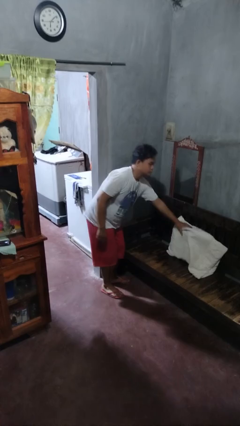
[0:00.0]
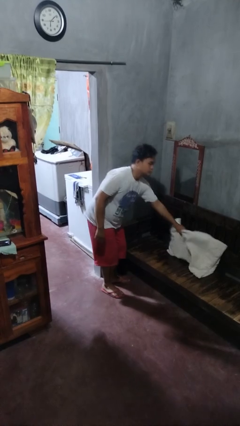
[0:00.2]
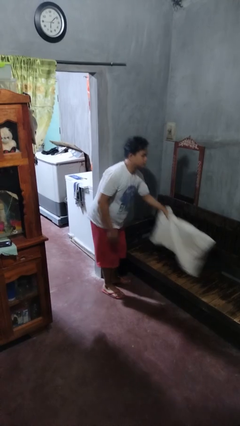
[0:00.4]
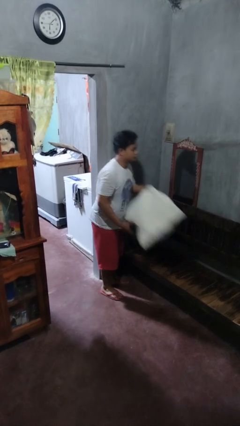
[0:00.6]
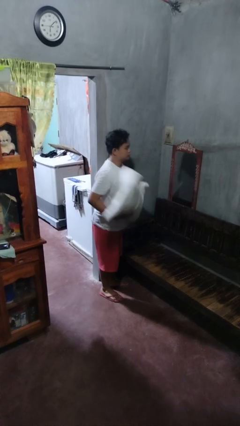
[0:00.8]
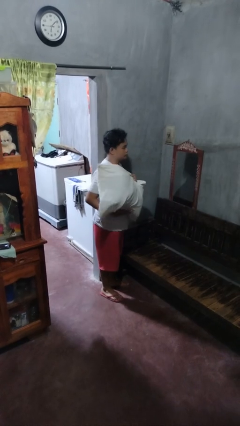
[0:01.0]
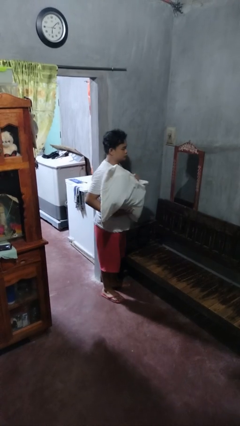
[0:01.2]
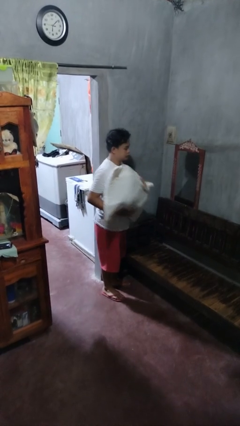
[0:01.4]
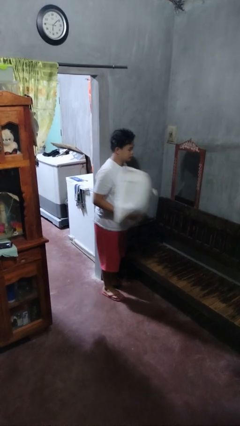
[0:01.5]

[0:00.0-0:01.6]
person picks up object from couch

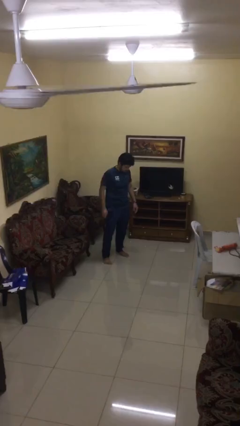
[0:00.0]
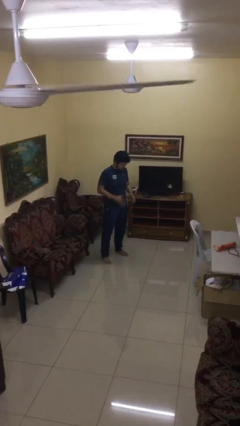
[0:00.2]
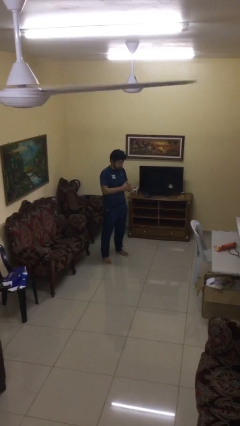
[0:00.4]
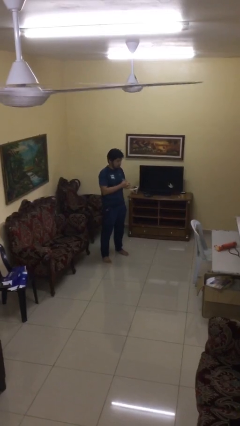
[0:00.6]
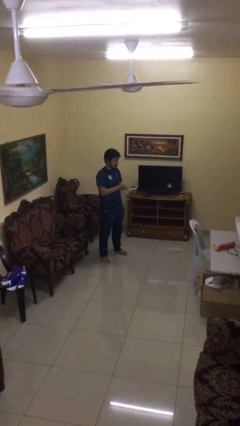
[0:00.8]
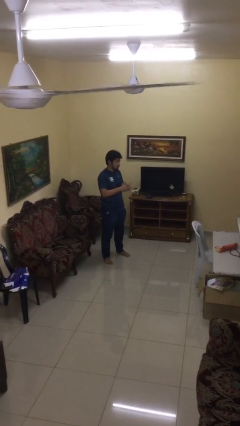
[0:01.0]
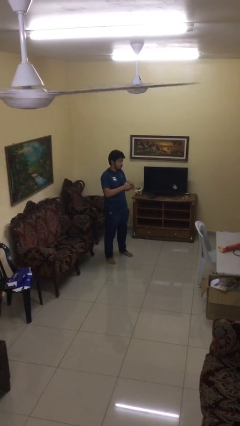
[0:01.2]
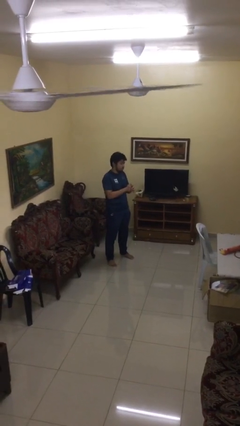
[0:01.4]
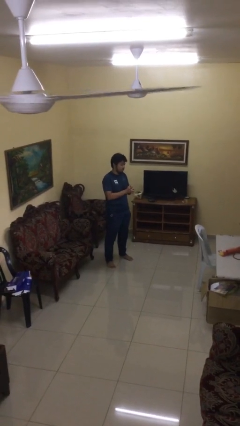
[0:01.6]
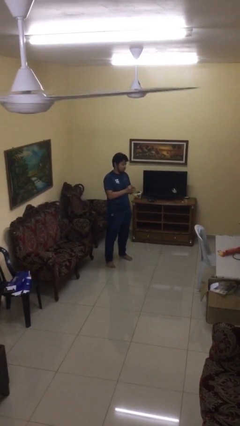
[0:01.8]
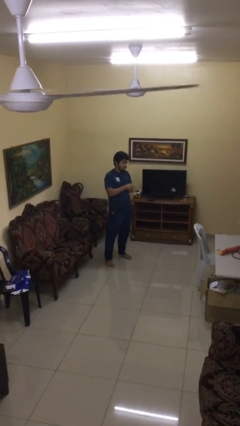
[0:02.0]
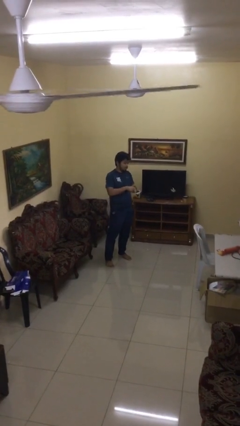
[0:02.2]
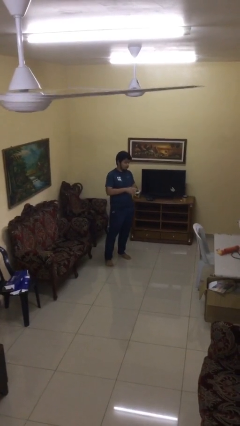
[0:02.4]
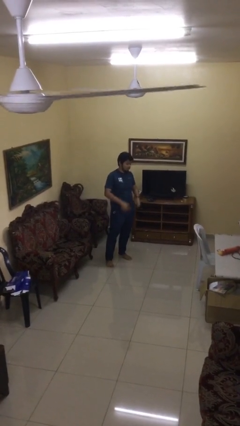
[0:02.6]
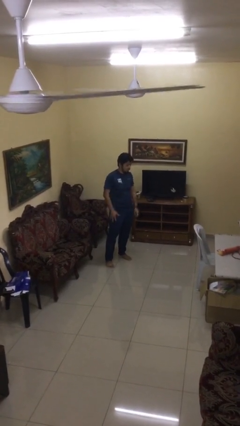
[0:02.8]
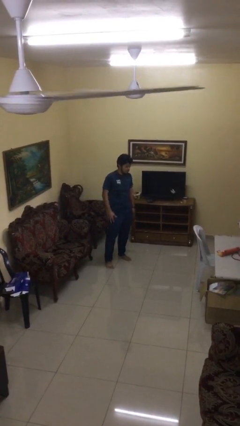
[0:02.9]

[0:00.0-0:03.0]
person cracks knuckles

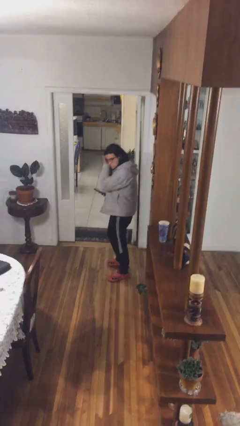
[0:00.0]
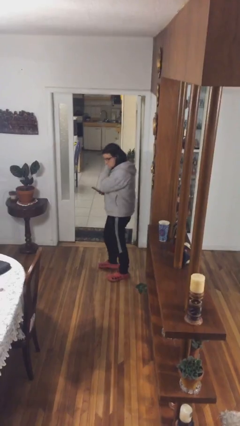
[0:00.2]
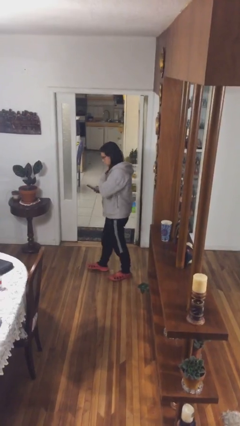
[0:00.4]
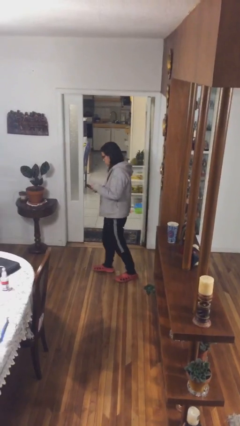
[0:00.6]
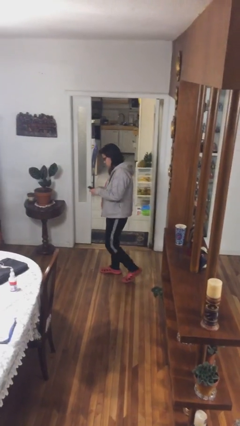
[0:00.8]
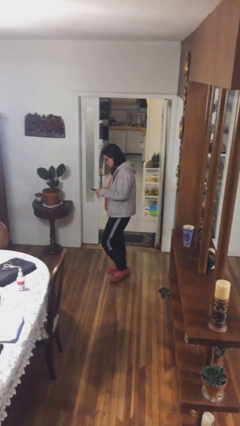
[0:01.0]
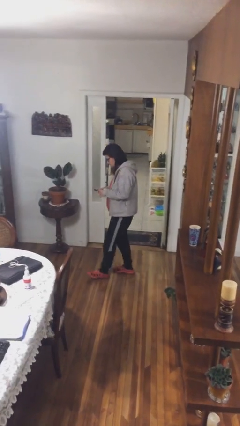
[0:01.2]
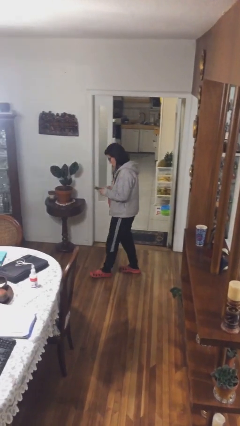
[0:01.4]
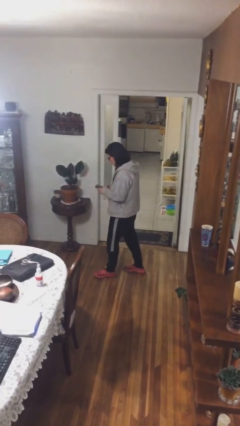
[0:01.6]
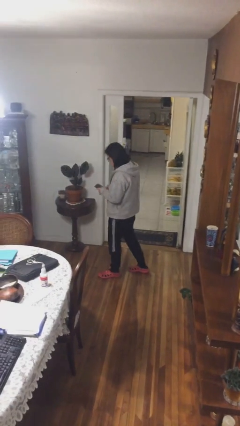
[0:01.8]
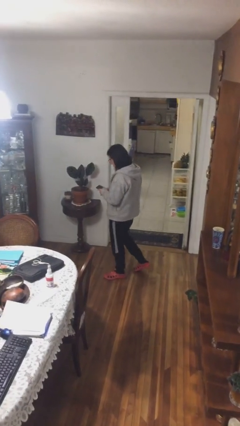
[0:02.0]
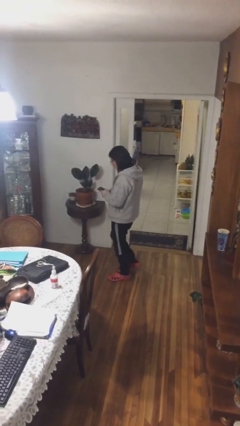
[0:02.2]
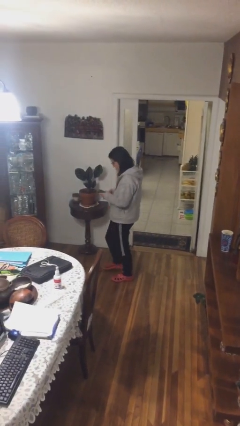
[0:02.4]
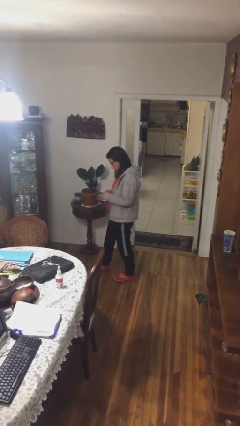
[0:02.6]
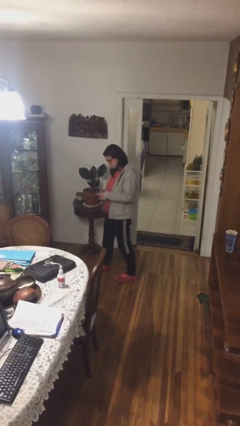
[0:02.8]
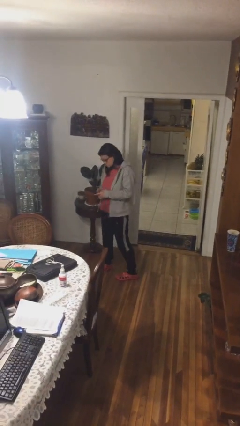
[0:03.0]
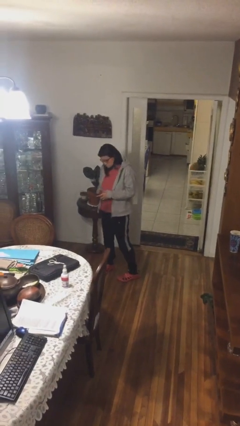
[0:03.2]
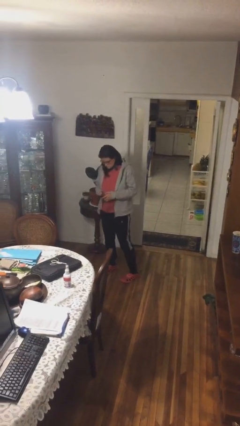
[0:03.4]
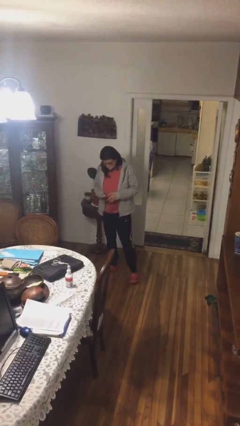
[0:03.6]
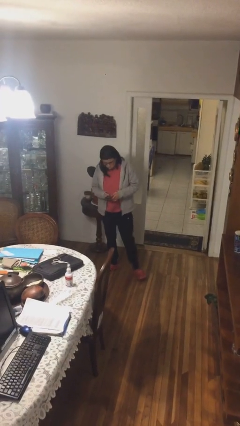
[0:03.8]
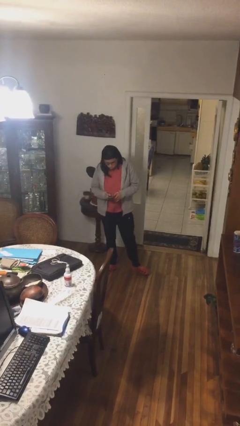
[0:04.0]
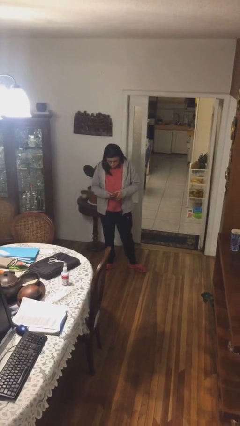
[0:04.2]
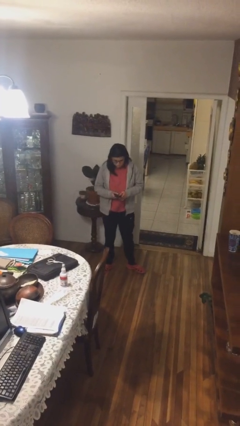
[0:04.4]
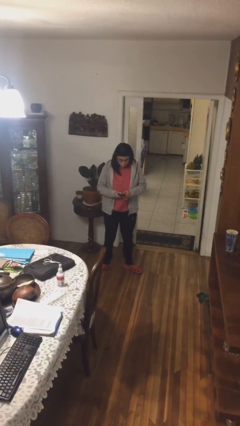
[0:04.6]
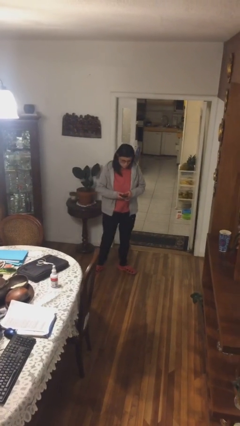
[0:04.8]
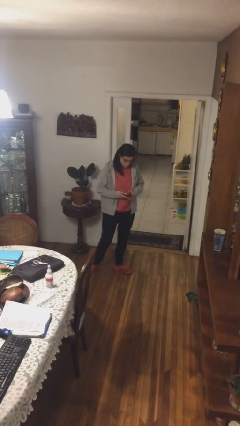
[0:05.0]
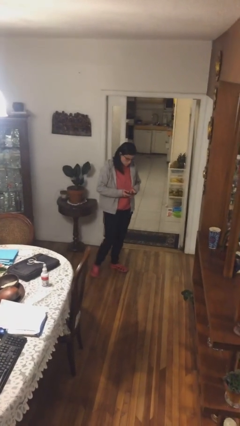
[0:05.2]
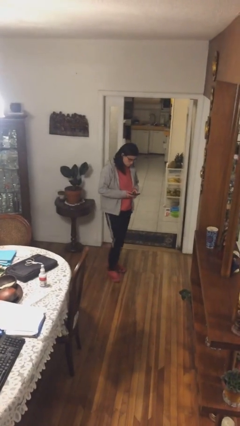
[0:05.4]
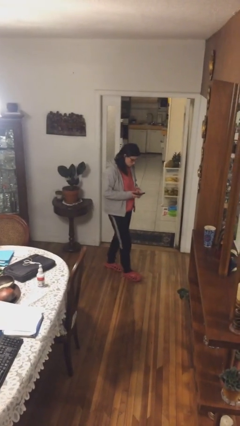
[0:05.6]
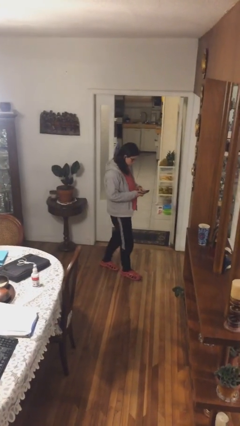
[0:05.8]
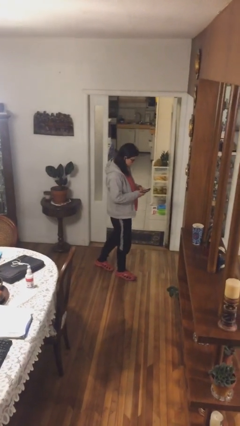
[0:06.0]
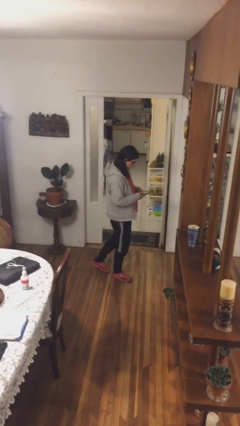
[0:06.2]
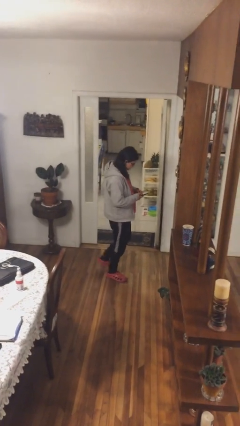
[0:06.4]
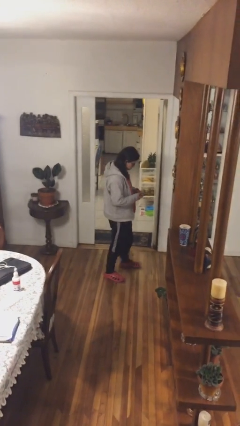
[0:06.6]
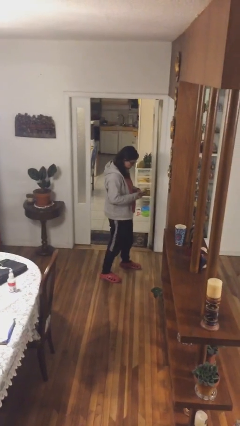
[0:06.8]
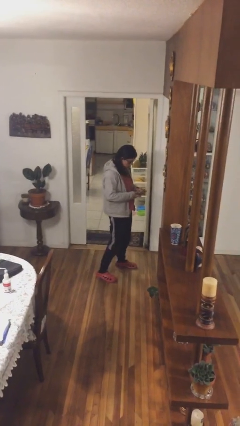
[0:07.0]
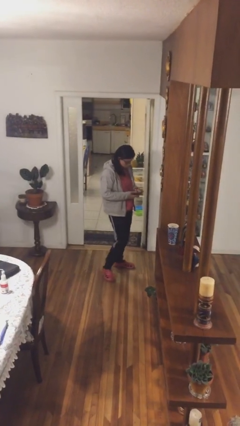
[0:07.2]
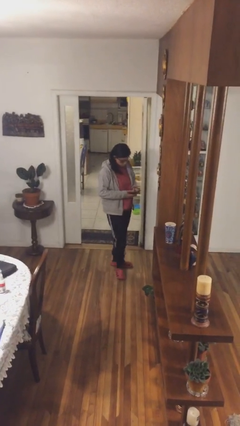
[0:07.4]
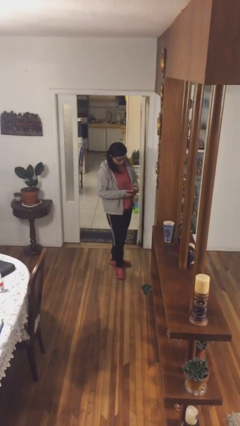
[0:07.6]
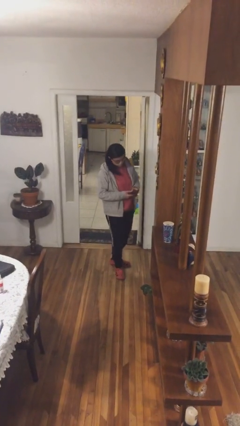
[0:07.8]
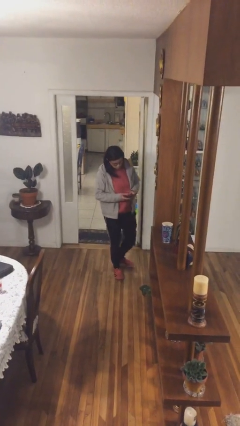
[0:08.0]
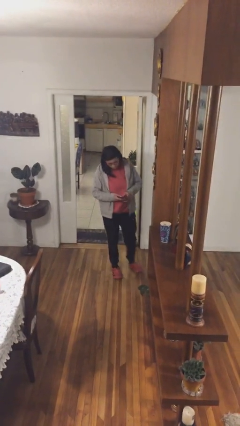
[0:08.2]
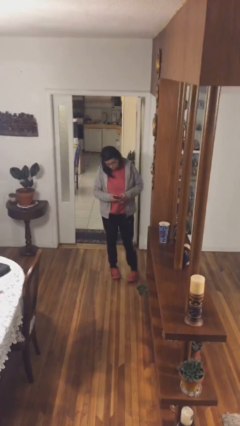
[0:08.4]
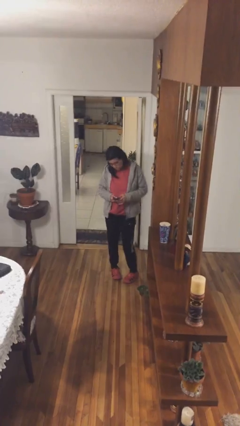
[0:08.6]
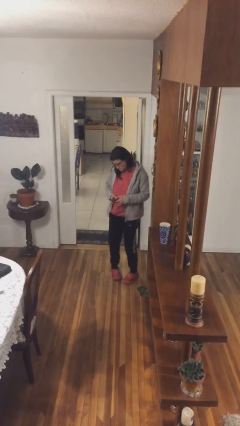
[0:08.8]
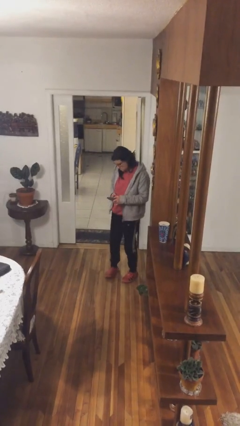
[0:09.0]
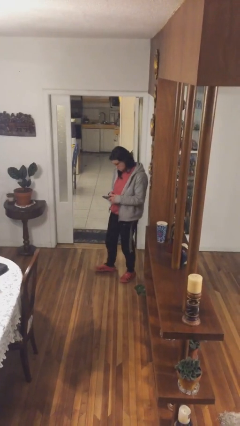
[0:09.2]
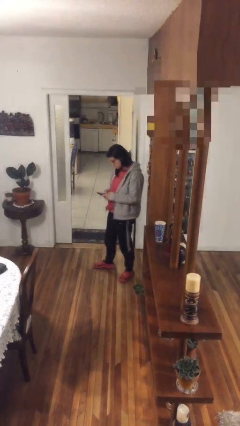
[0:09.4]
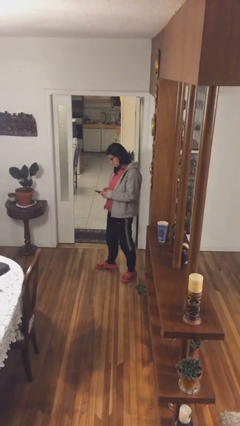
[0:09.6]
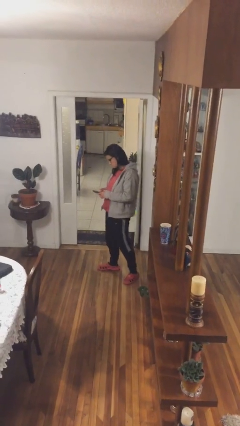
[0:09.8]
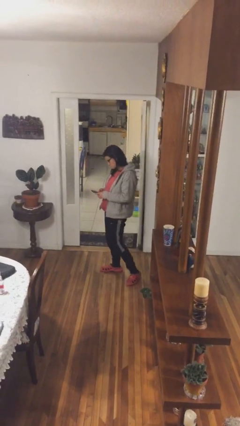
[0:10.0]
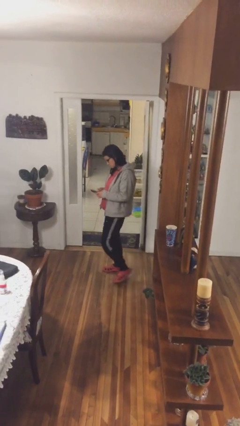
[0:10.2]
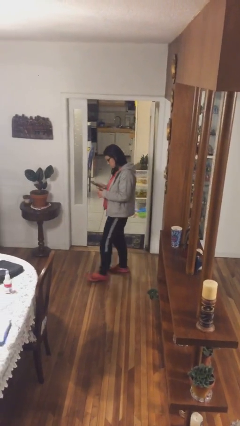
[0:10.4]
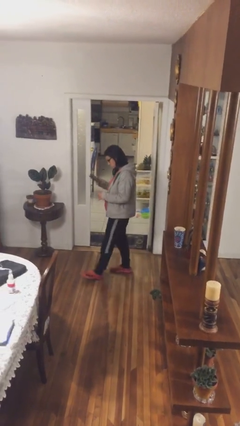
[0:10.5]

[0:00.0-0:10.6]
person texts on phone

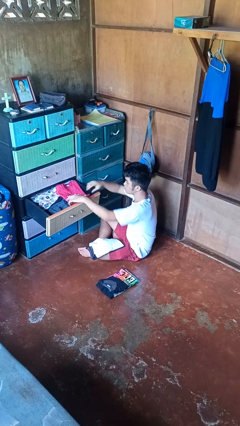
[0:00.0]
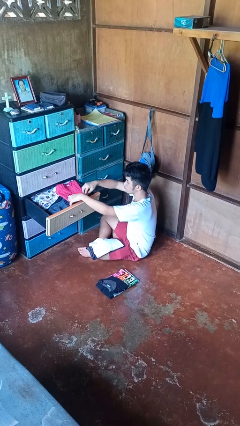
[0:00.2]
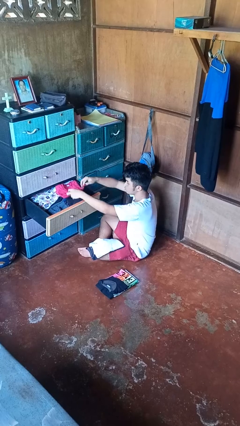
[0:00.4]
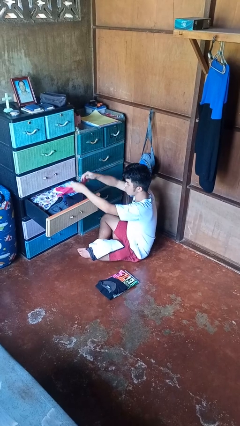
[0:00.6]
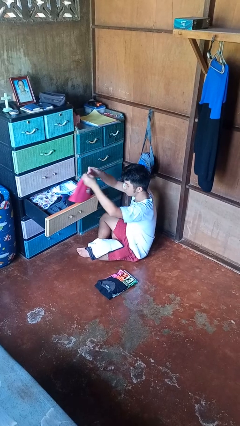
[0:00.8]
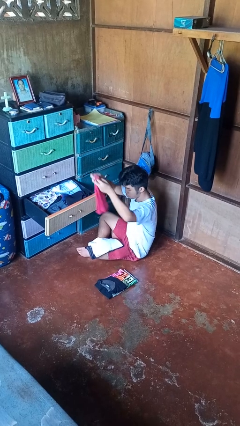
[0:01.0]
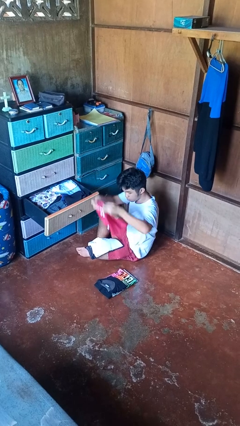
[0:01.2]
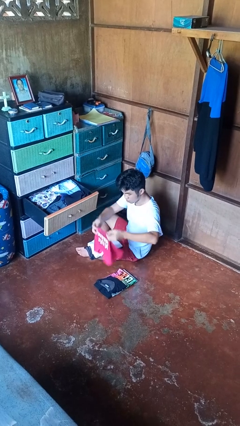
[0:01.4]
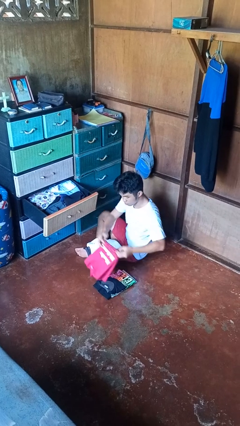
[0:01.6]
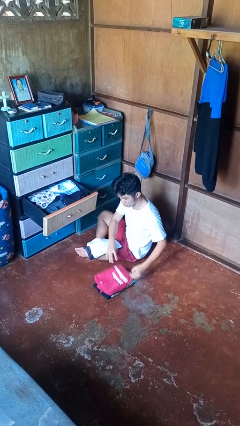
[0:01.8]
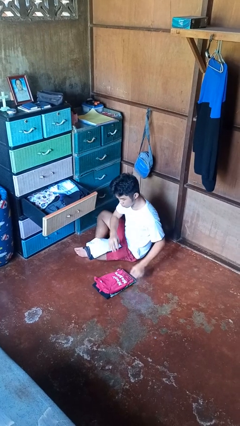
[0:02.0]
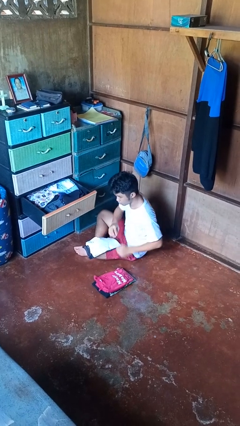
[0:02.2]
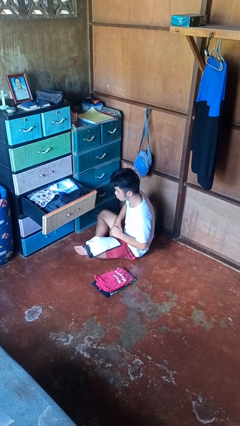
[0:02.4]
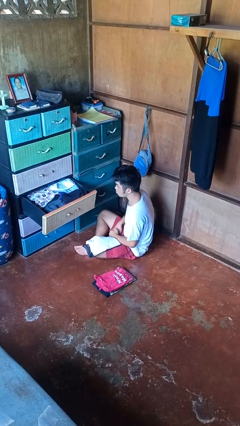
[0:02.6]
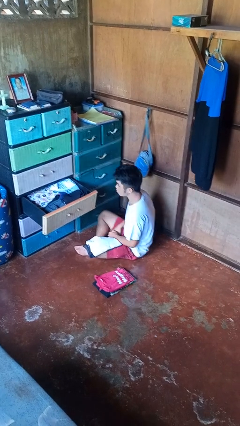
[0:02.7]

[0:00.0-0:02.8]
person takes clothes from dresser
